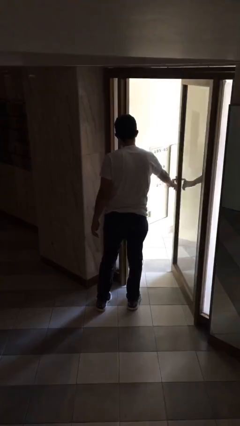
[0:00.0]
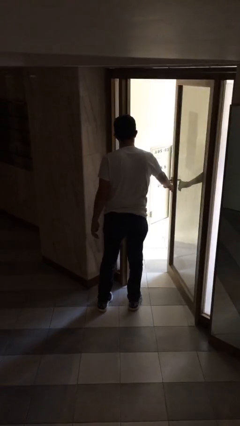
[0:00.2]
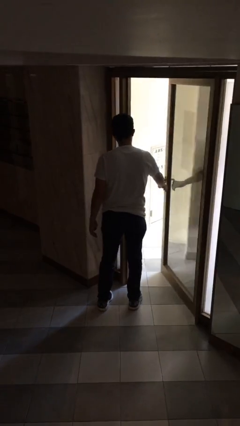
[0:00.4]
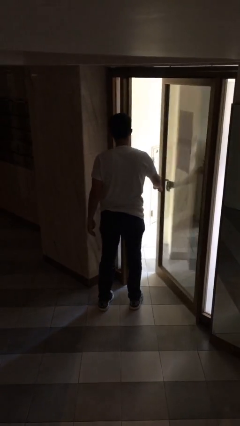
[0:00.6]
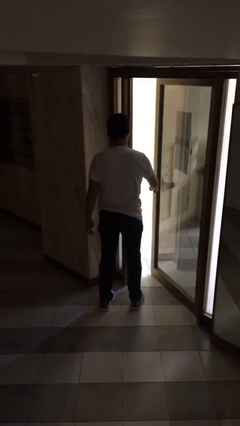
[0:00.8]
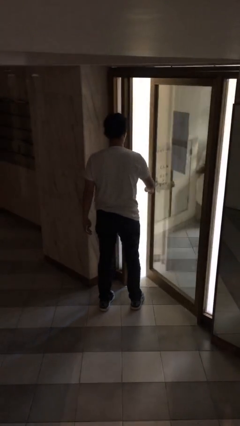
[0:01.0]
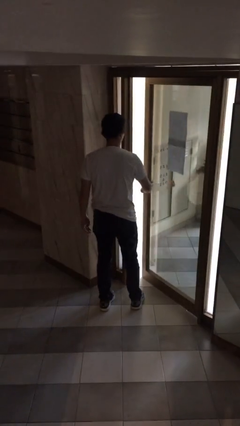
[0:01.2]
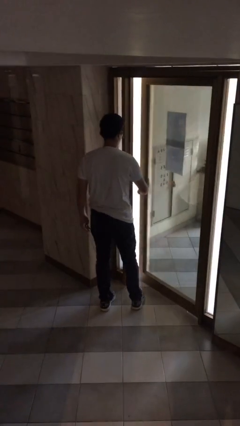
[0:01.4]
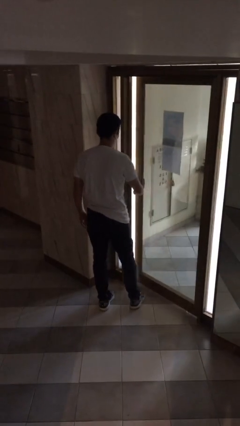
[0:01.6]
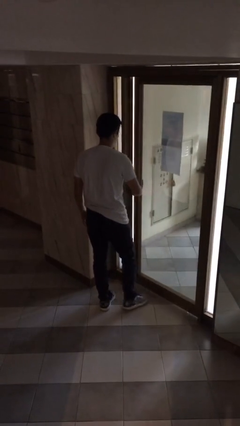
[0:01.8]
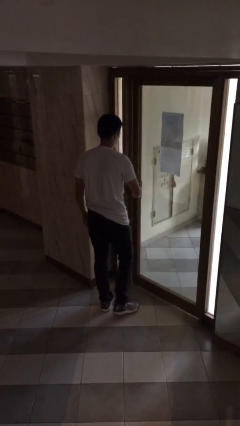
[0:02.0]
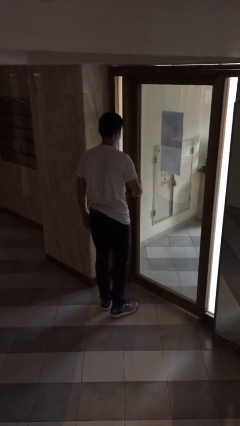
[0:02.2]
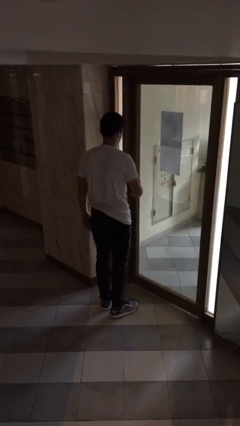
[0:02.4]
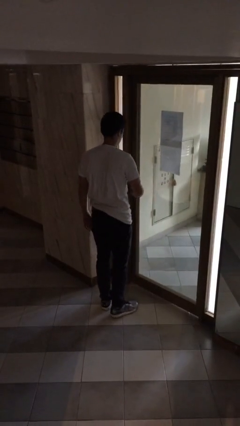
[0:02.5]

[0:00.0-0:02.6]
person closes facility door

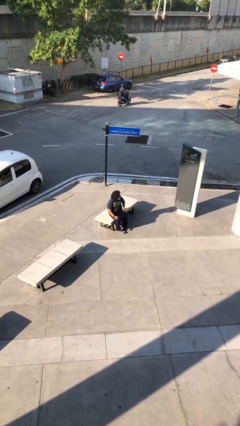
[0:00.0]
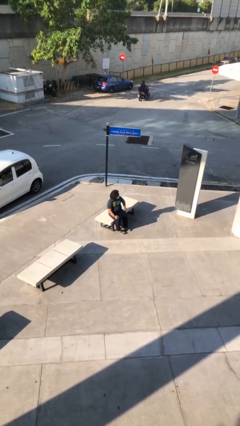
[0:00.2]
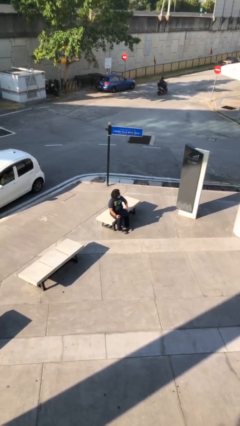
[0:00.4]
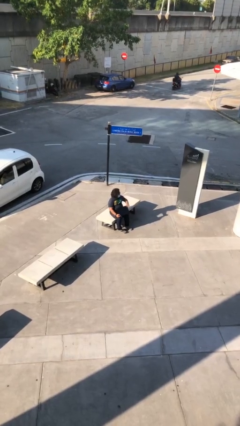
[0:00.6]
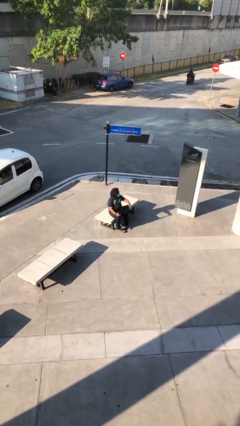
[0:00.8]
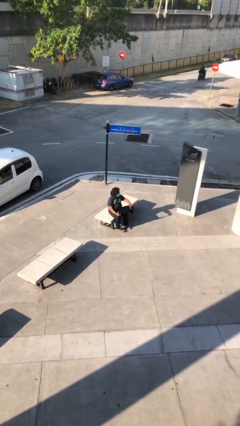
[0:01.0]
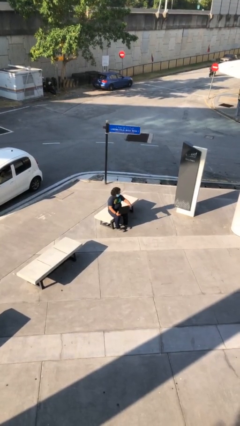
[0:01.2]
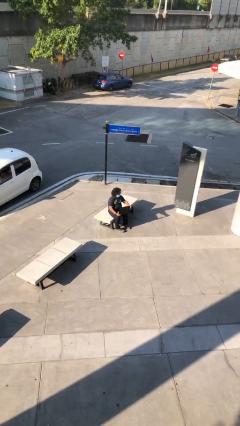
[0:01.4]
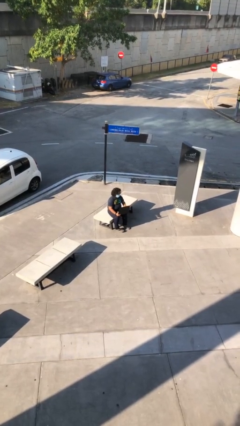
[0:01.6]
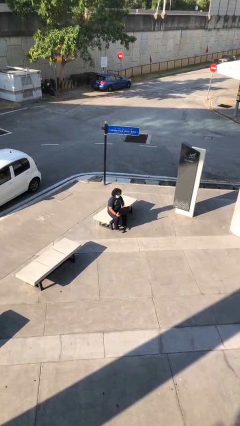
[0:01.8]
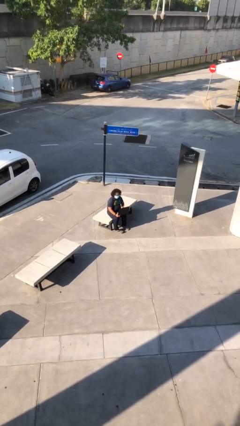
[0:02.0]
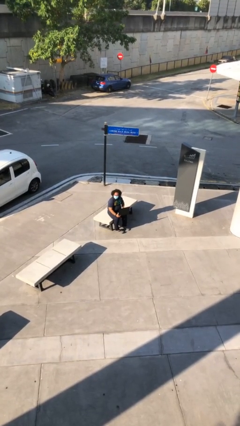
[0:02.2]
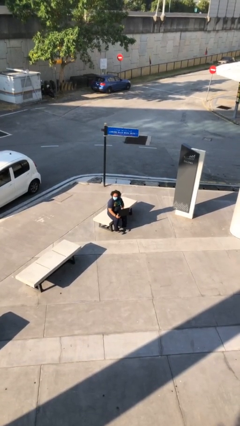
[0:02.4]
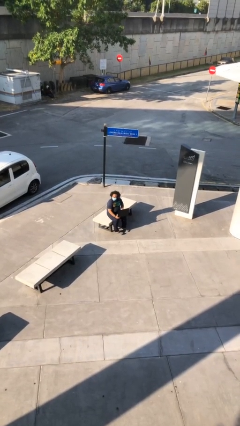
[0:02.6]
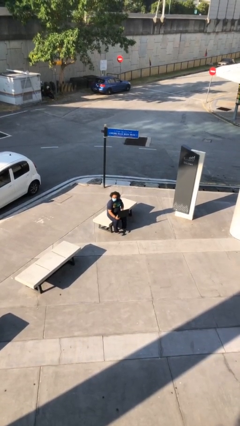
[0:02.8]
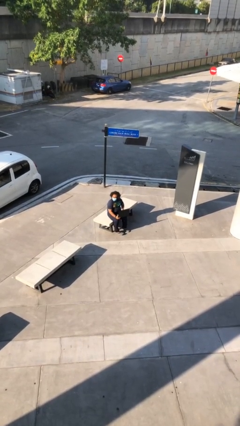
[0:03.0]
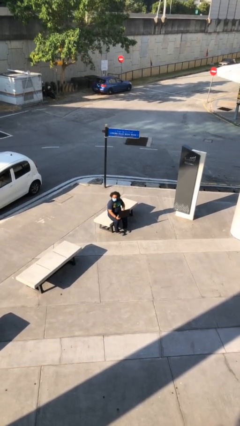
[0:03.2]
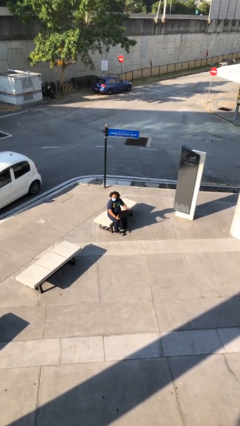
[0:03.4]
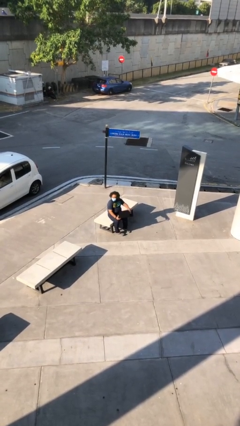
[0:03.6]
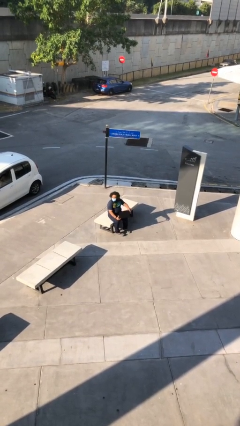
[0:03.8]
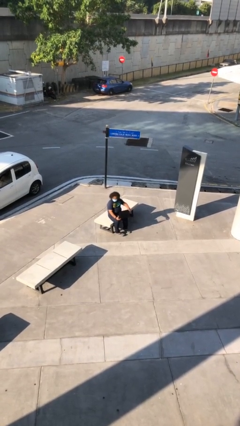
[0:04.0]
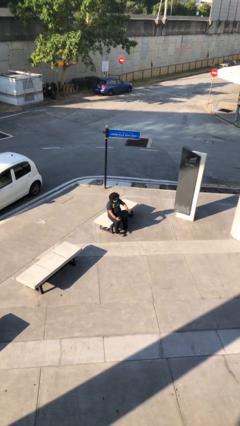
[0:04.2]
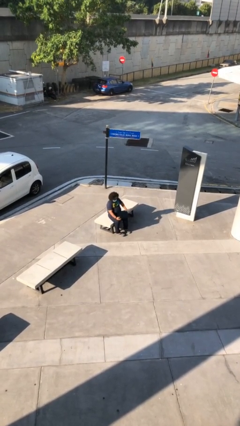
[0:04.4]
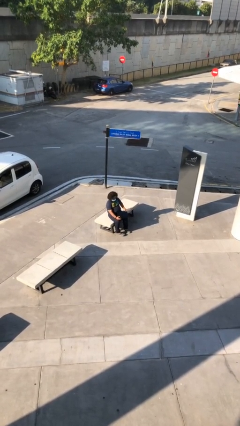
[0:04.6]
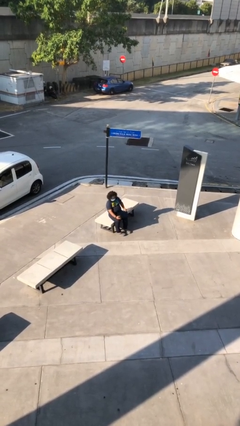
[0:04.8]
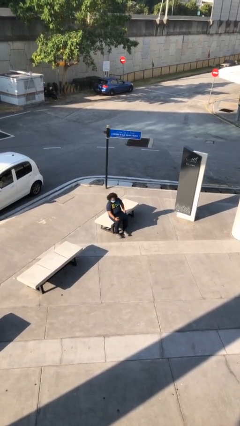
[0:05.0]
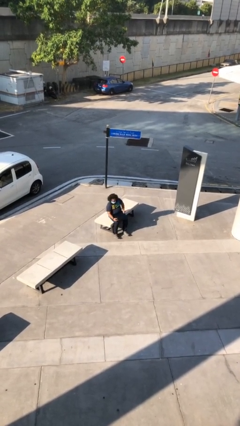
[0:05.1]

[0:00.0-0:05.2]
person interacts with laptop

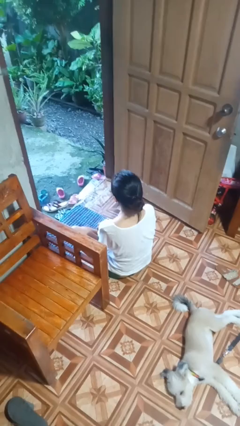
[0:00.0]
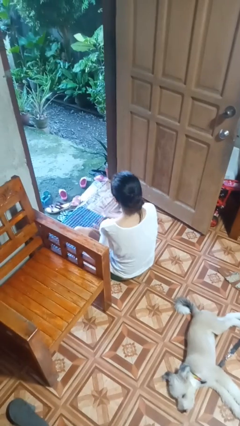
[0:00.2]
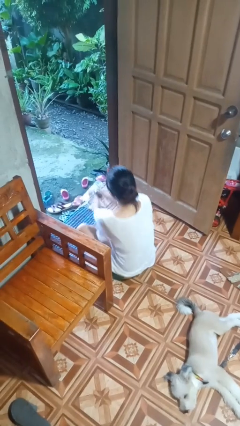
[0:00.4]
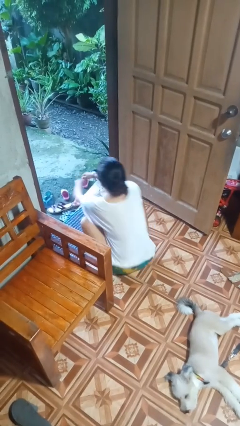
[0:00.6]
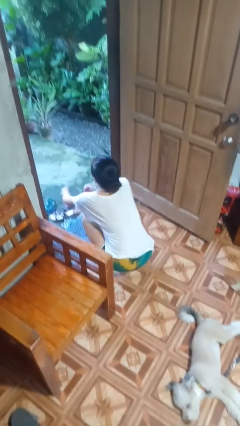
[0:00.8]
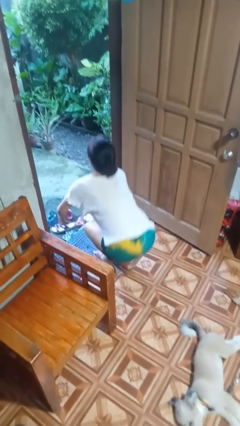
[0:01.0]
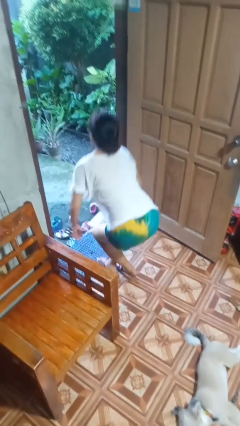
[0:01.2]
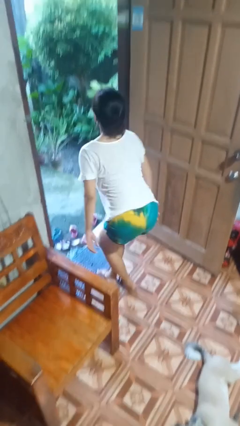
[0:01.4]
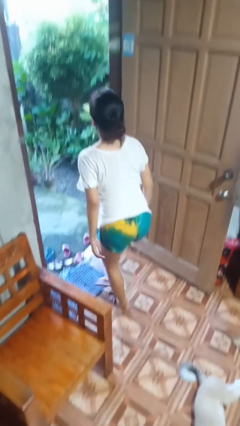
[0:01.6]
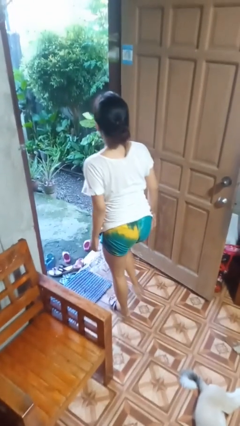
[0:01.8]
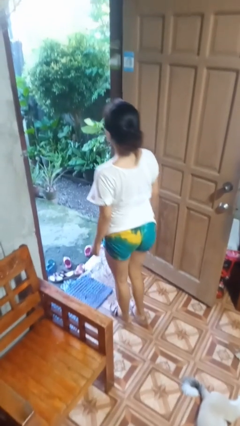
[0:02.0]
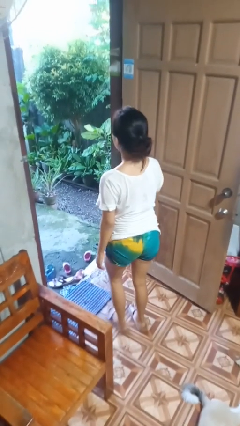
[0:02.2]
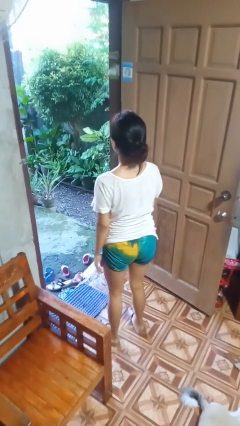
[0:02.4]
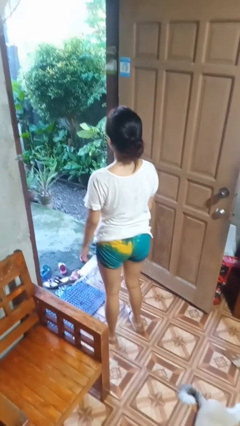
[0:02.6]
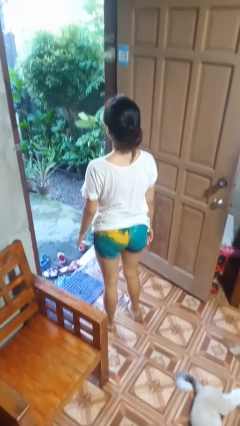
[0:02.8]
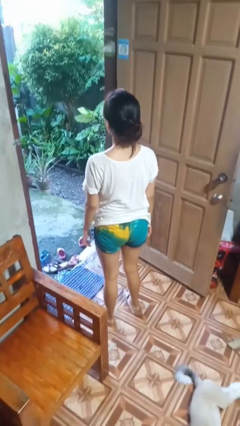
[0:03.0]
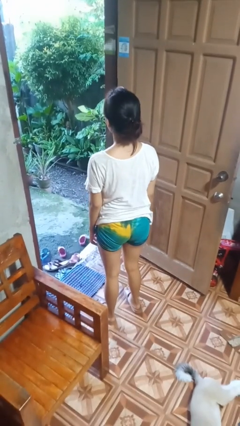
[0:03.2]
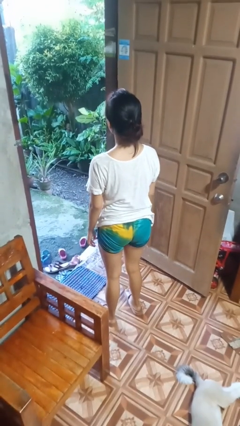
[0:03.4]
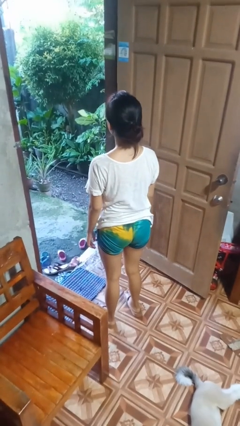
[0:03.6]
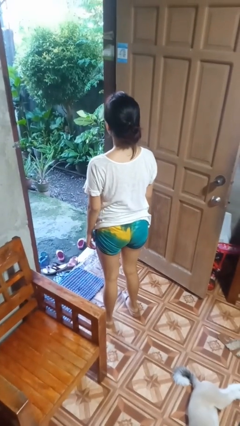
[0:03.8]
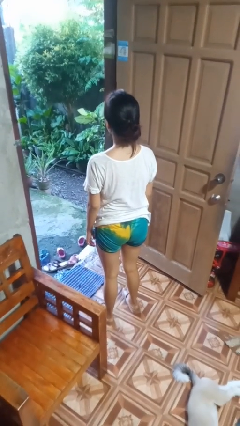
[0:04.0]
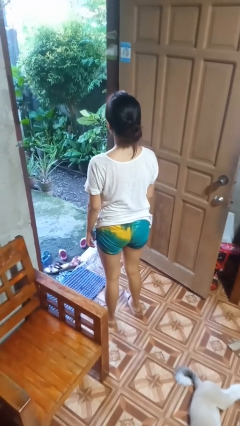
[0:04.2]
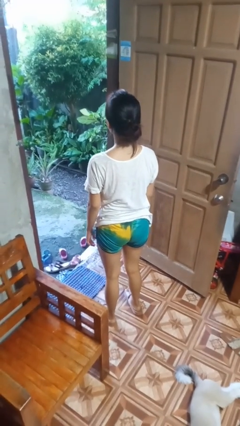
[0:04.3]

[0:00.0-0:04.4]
person stands up from floor

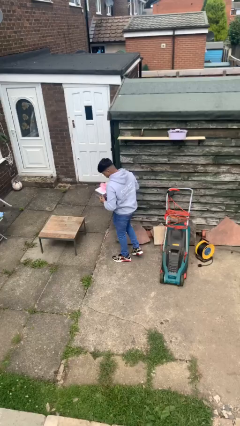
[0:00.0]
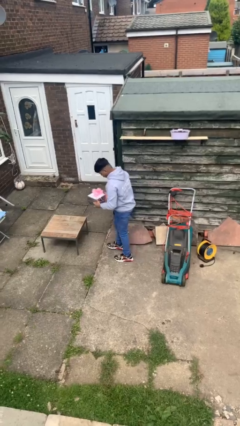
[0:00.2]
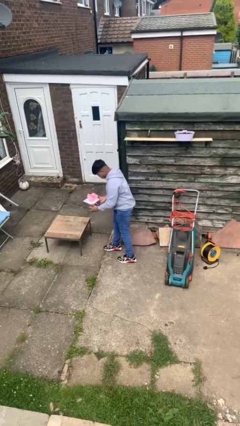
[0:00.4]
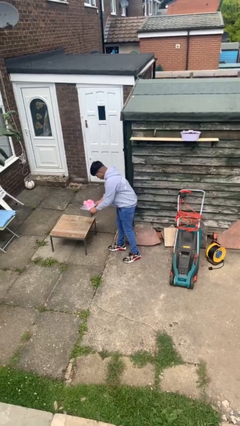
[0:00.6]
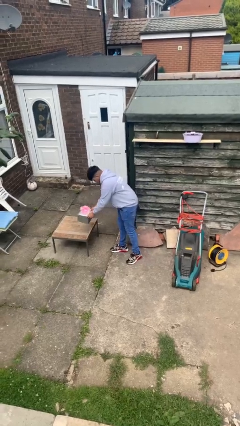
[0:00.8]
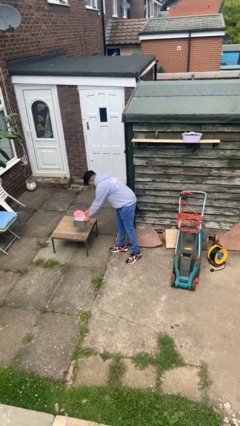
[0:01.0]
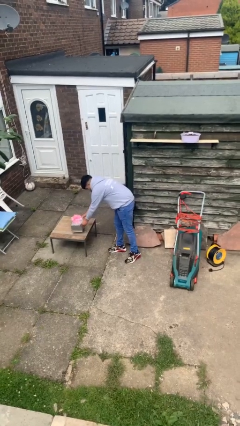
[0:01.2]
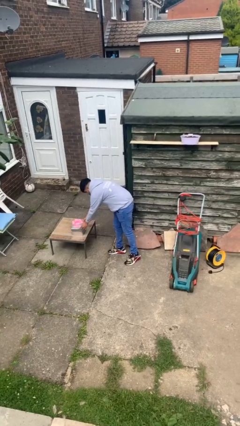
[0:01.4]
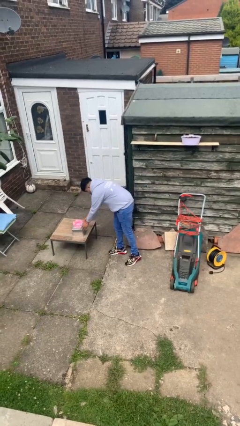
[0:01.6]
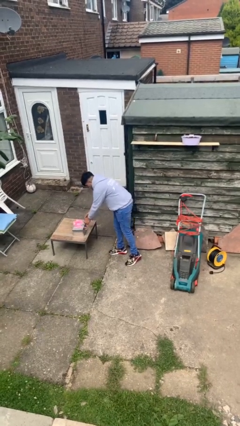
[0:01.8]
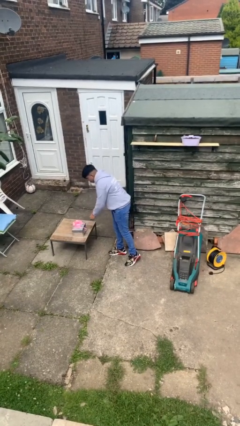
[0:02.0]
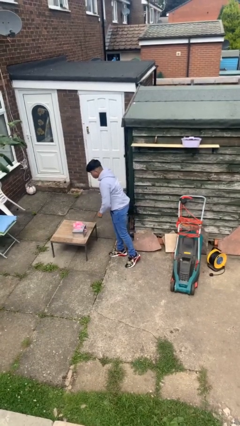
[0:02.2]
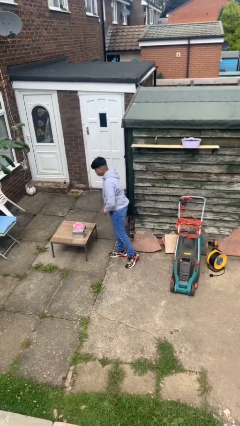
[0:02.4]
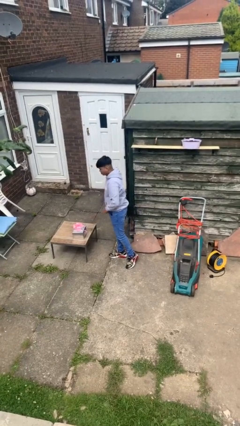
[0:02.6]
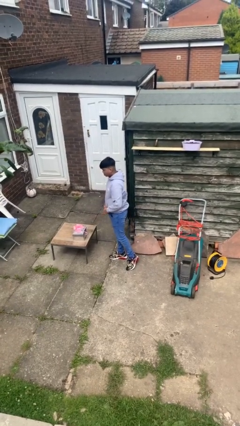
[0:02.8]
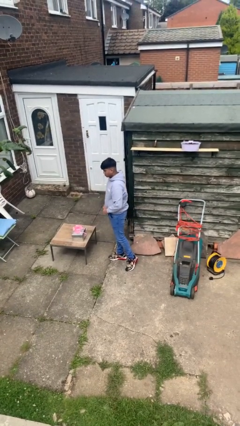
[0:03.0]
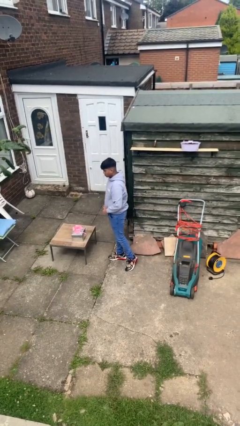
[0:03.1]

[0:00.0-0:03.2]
person puts down object on table

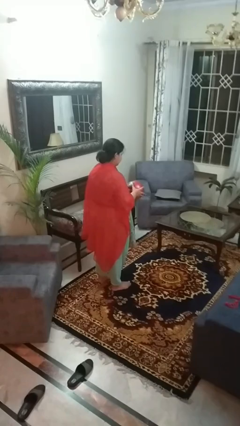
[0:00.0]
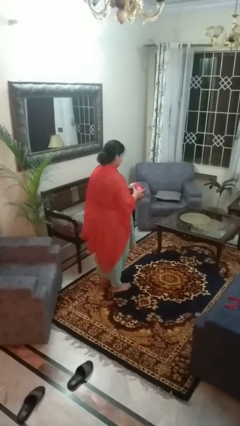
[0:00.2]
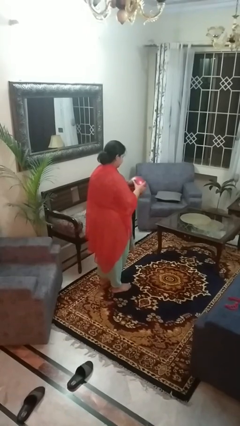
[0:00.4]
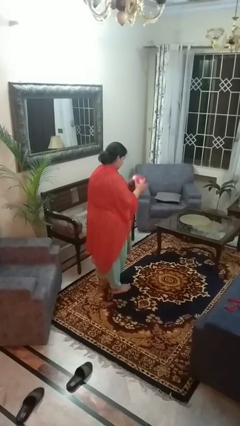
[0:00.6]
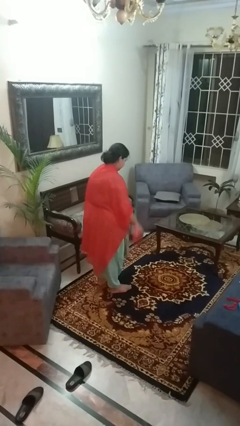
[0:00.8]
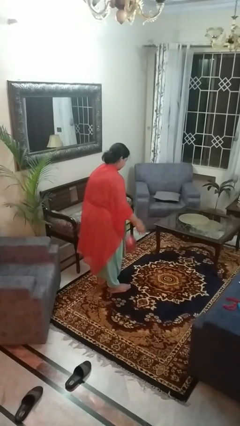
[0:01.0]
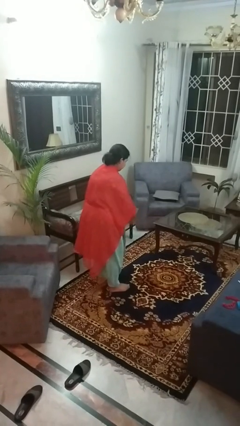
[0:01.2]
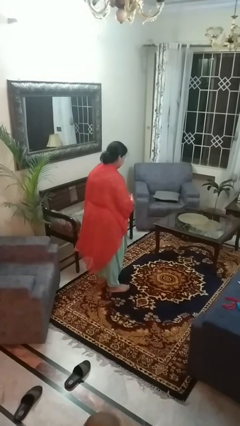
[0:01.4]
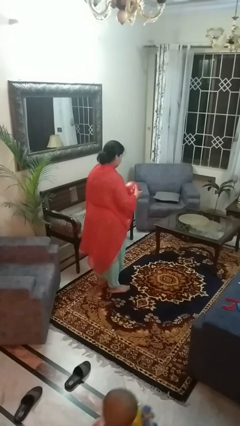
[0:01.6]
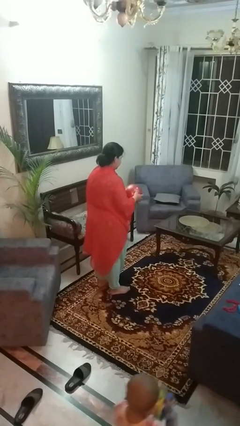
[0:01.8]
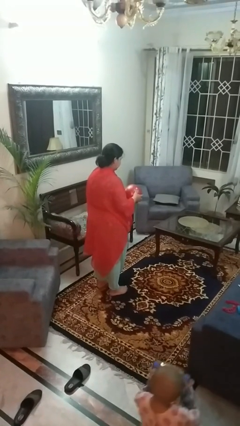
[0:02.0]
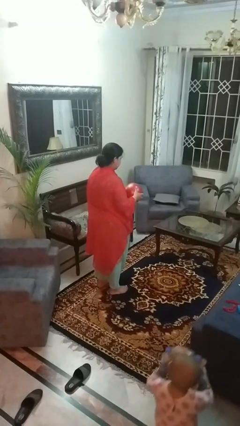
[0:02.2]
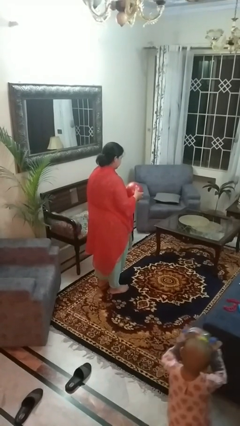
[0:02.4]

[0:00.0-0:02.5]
person bounces ball on floor
